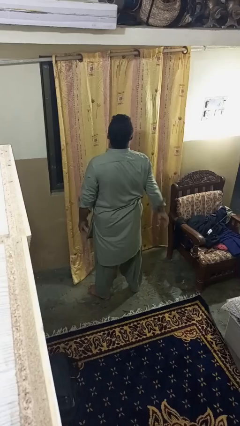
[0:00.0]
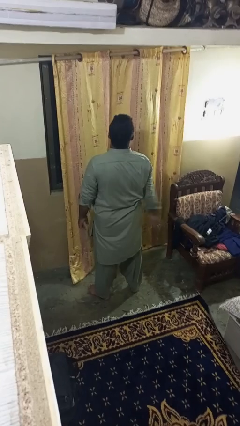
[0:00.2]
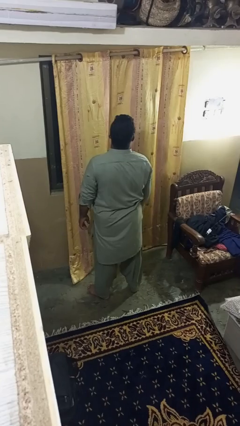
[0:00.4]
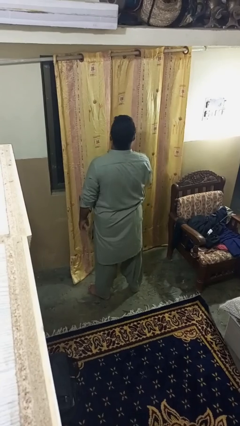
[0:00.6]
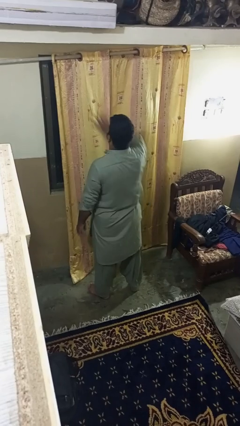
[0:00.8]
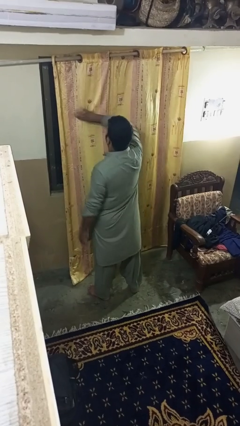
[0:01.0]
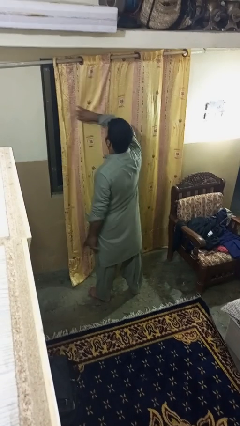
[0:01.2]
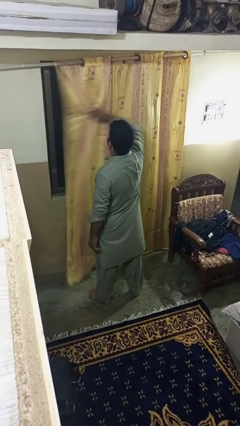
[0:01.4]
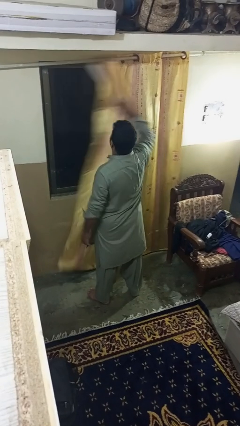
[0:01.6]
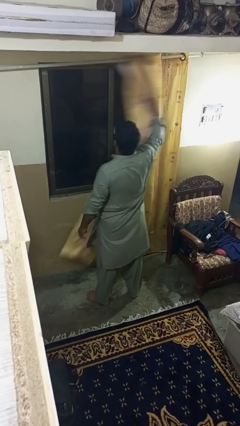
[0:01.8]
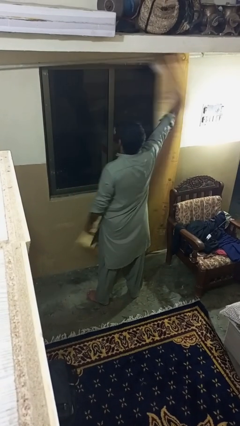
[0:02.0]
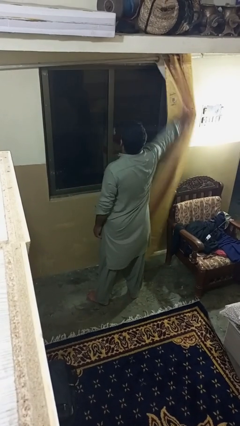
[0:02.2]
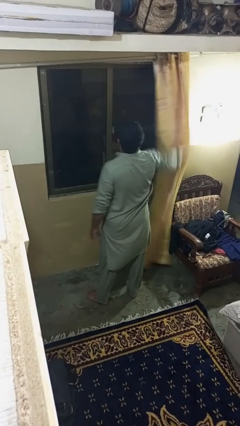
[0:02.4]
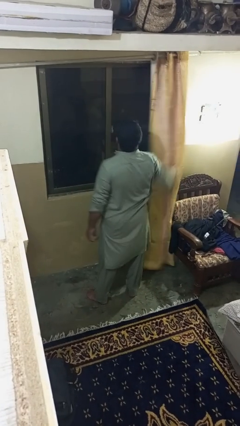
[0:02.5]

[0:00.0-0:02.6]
person opens curtains

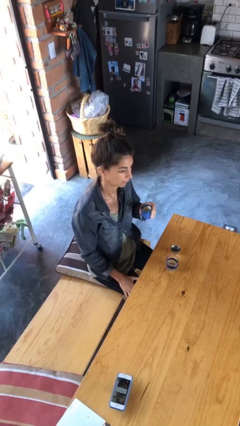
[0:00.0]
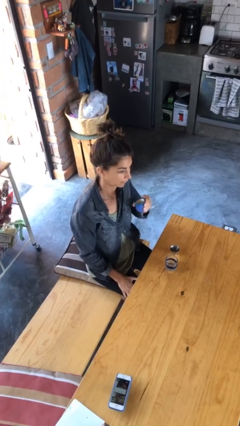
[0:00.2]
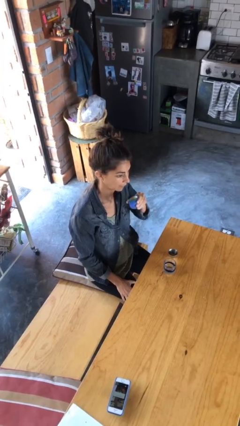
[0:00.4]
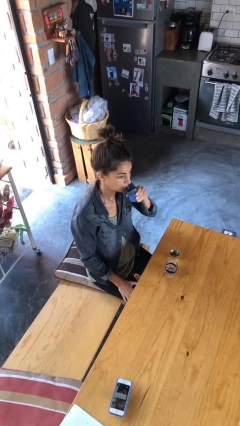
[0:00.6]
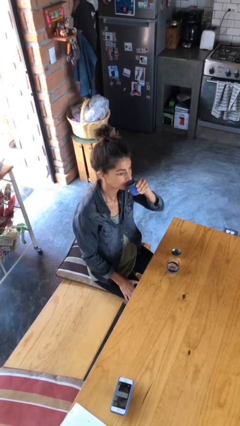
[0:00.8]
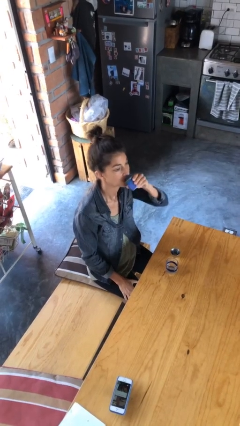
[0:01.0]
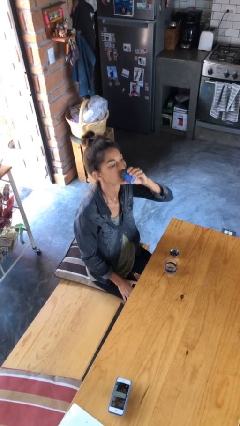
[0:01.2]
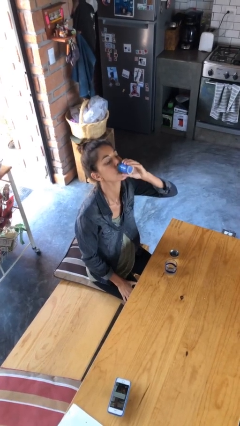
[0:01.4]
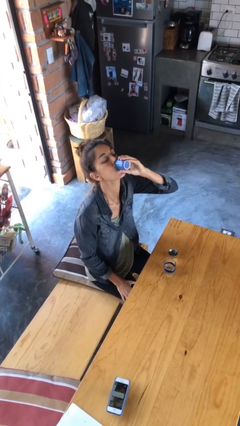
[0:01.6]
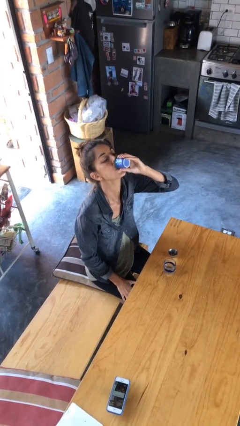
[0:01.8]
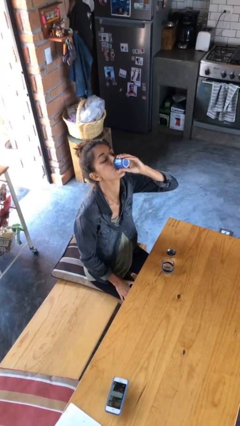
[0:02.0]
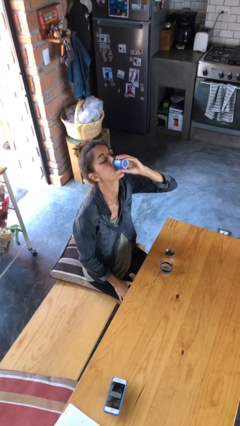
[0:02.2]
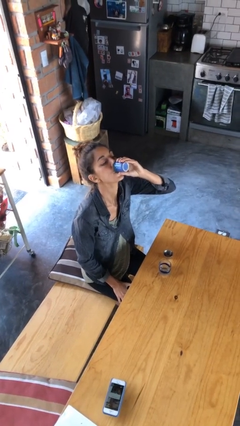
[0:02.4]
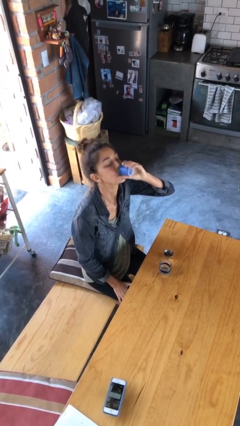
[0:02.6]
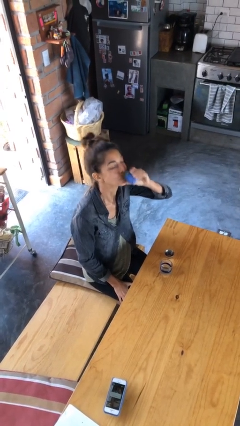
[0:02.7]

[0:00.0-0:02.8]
person drinks from shotglass

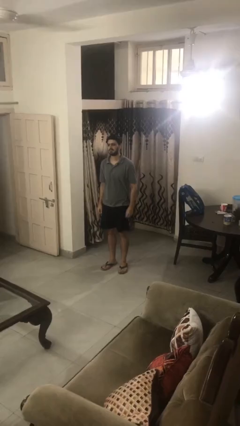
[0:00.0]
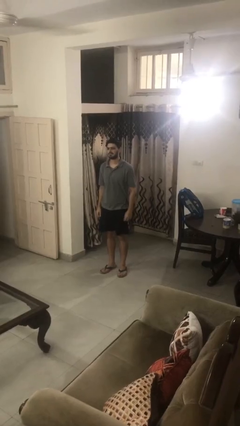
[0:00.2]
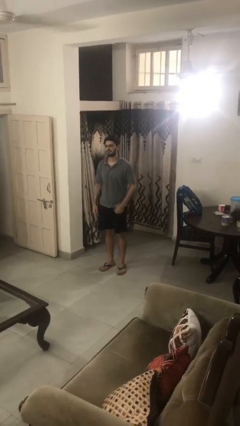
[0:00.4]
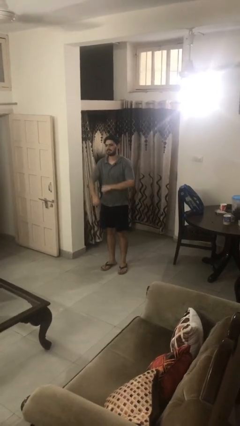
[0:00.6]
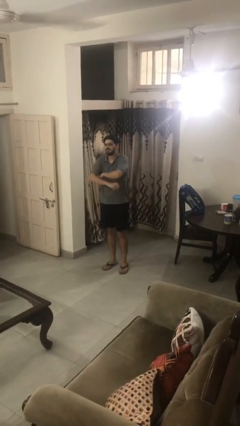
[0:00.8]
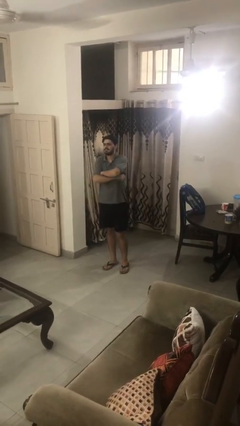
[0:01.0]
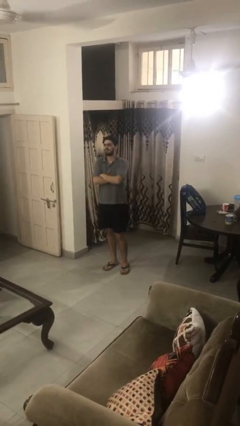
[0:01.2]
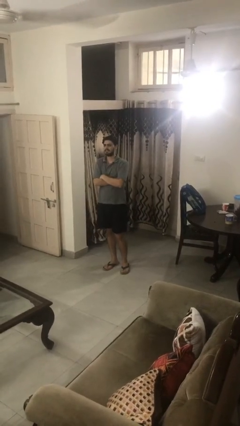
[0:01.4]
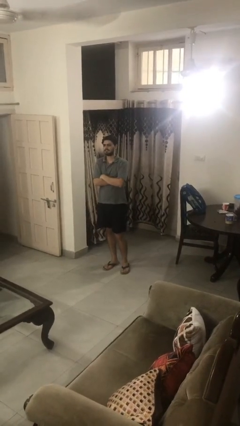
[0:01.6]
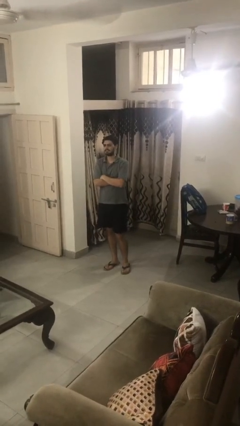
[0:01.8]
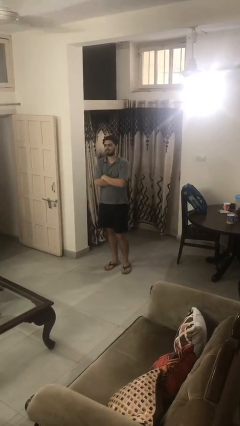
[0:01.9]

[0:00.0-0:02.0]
person crosses arms

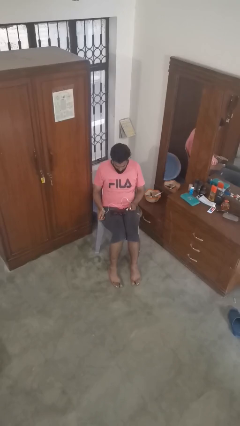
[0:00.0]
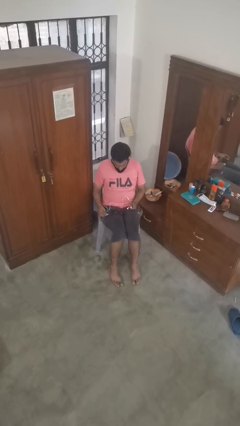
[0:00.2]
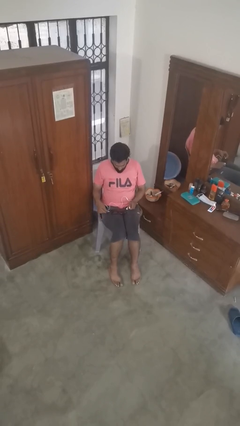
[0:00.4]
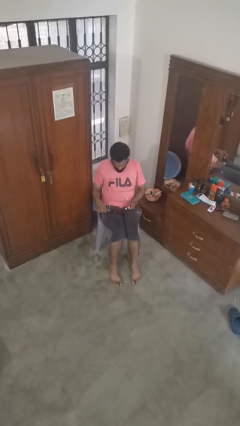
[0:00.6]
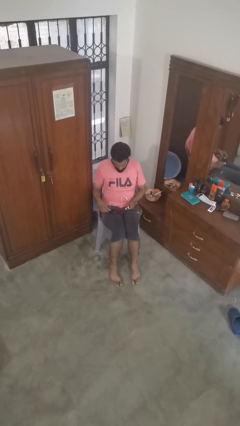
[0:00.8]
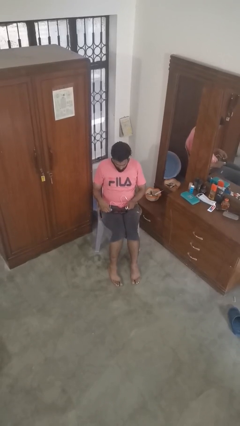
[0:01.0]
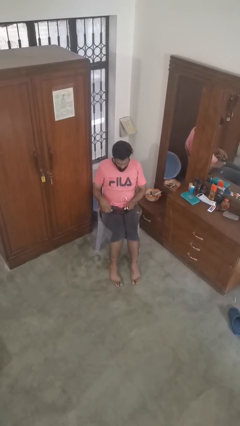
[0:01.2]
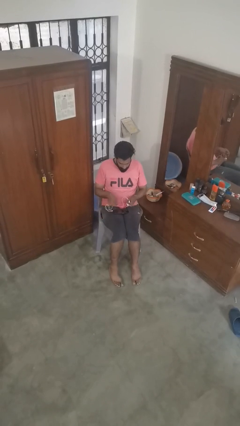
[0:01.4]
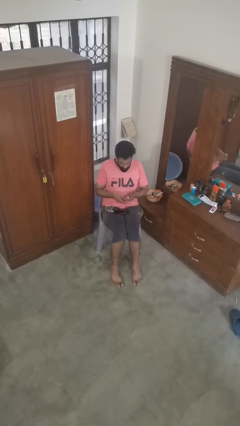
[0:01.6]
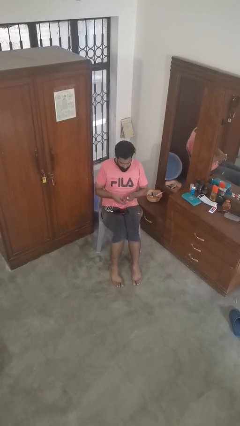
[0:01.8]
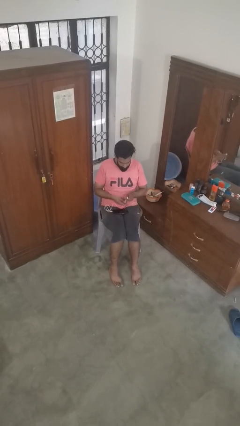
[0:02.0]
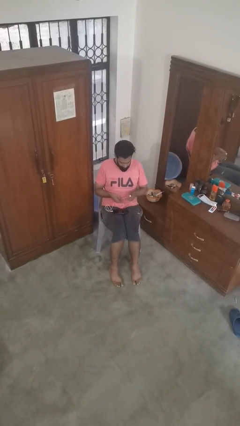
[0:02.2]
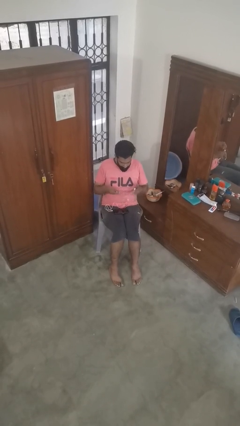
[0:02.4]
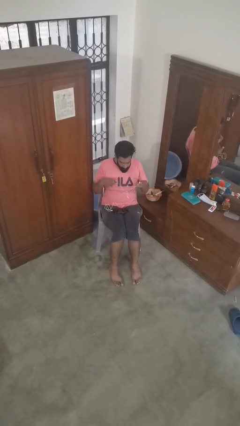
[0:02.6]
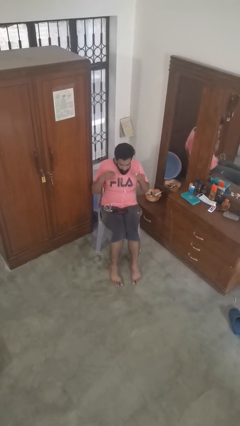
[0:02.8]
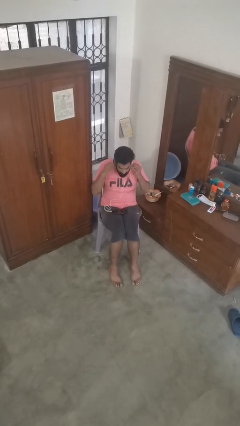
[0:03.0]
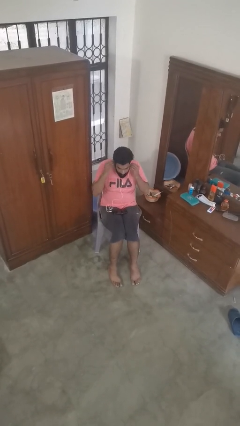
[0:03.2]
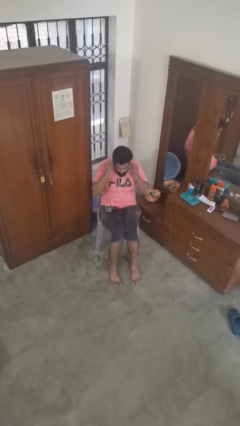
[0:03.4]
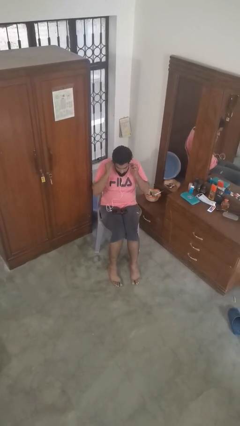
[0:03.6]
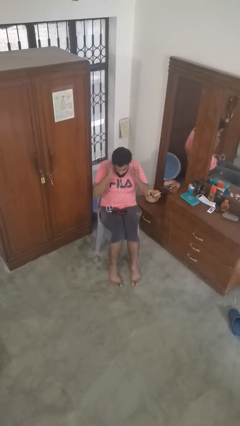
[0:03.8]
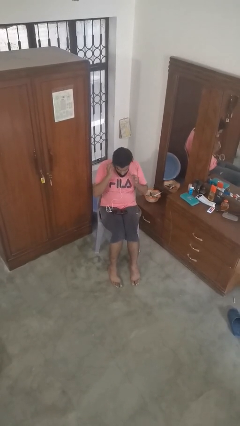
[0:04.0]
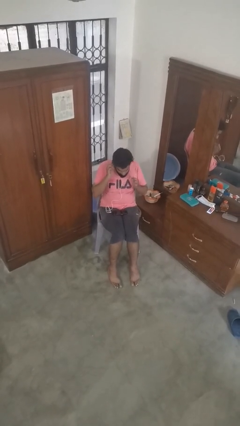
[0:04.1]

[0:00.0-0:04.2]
person puts on headphones

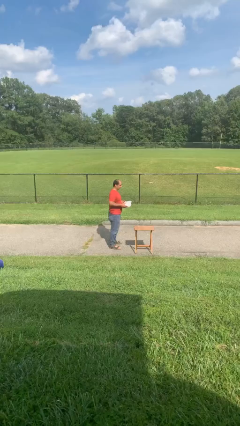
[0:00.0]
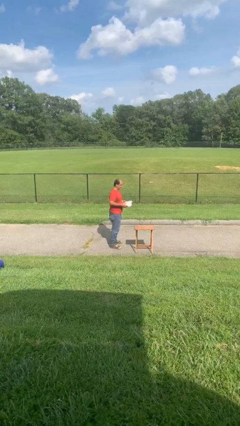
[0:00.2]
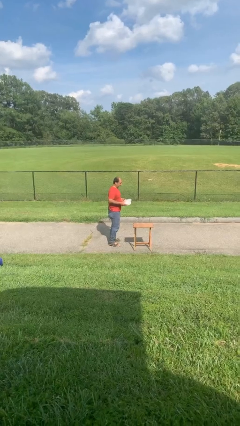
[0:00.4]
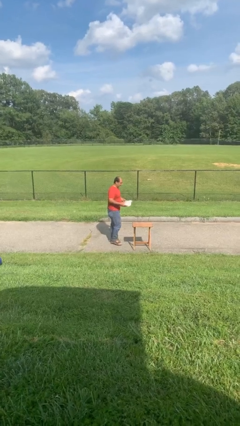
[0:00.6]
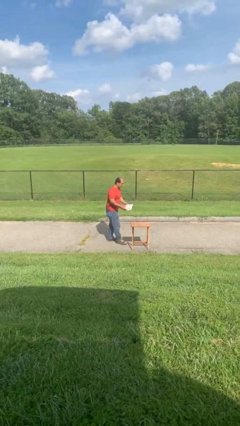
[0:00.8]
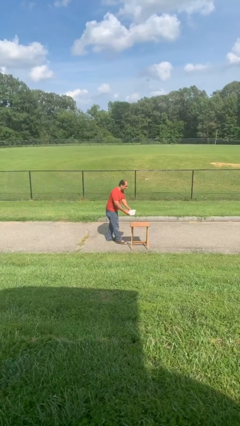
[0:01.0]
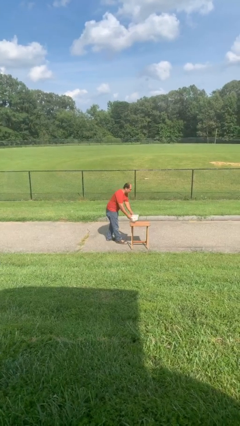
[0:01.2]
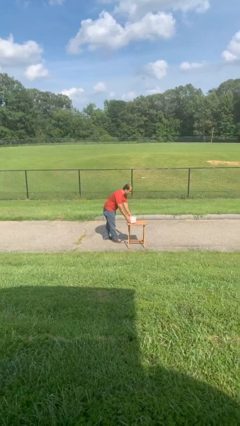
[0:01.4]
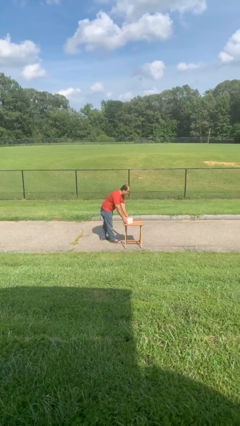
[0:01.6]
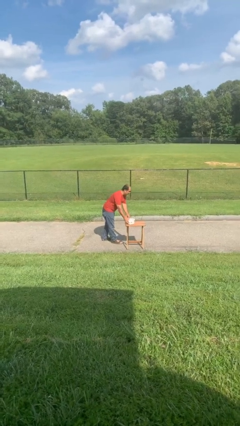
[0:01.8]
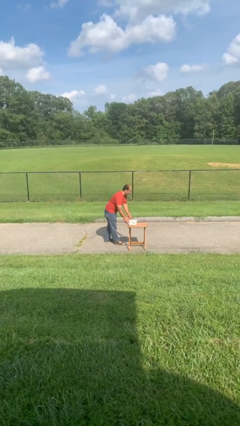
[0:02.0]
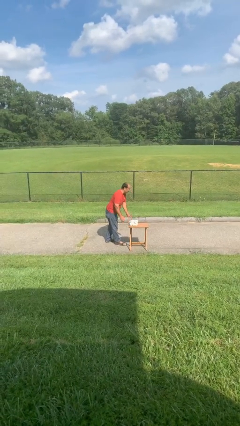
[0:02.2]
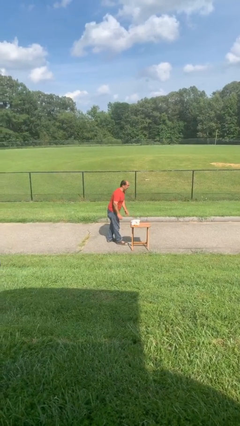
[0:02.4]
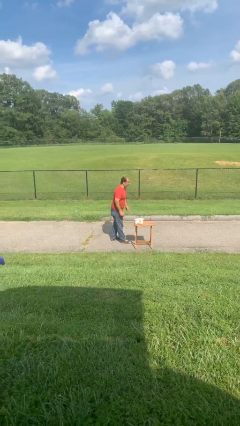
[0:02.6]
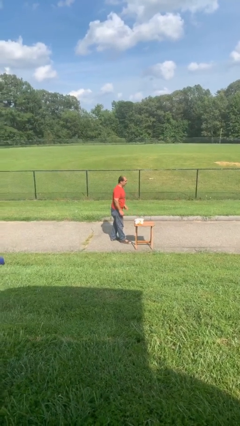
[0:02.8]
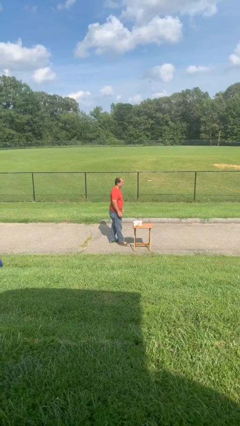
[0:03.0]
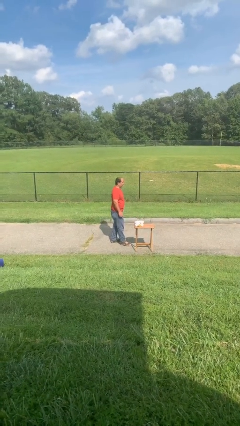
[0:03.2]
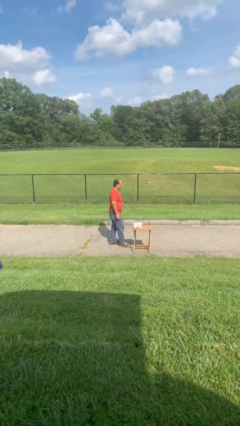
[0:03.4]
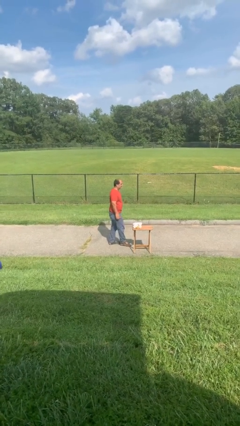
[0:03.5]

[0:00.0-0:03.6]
person puts down object on table

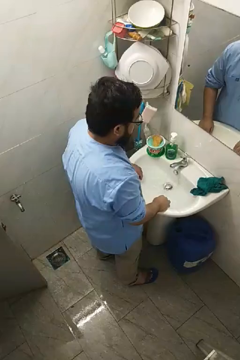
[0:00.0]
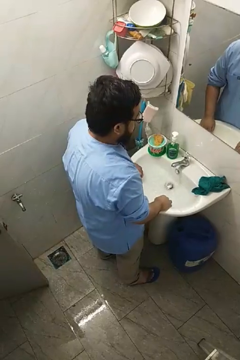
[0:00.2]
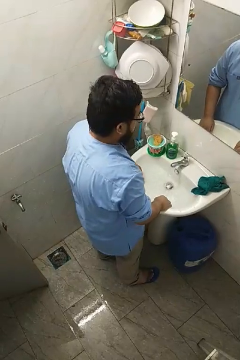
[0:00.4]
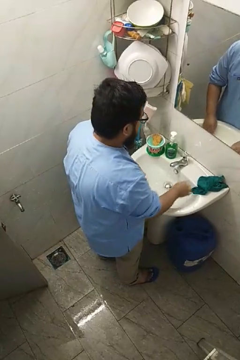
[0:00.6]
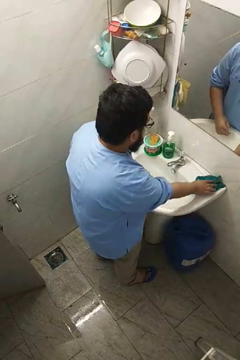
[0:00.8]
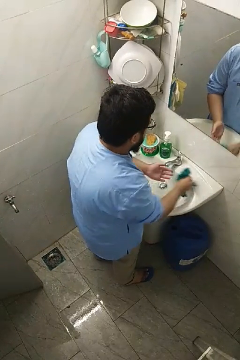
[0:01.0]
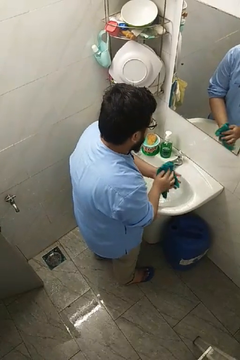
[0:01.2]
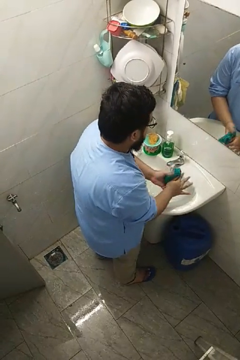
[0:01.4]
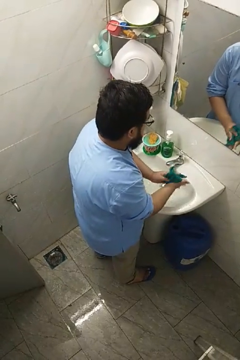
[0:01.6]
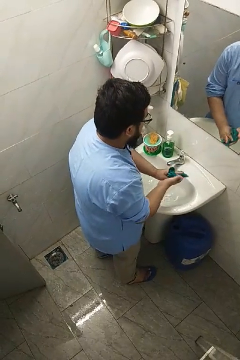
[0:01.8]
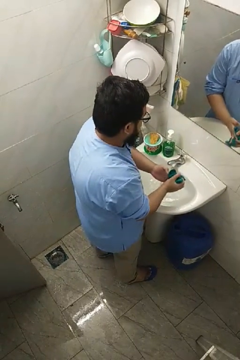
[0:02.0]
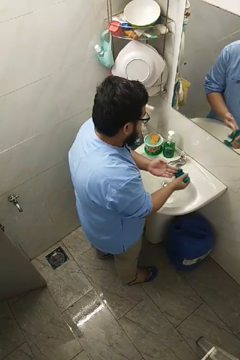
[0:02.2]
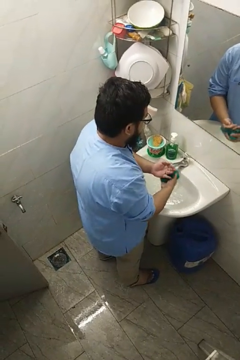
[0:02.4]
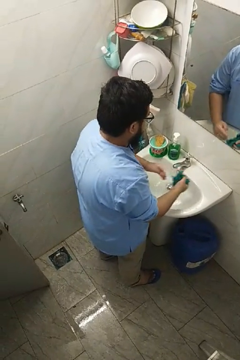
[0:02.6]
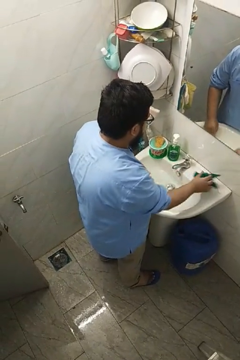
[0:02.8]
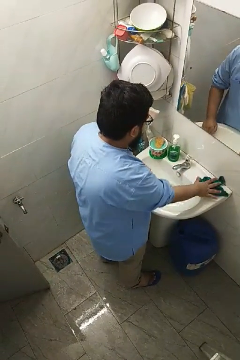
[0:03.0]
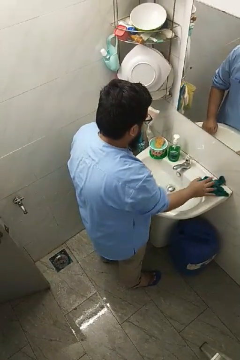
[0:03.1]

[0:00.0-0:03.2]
person dries hands with towel
